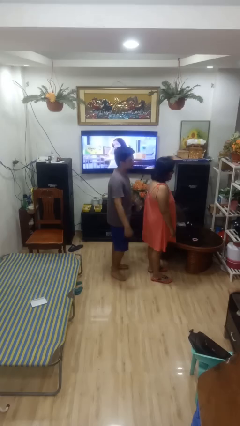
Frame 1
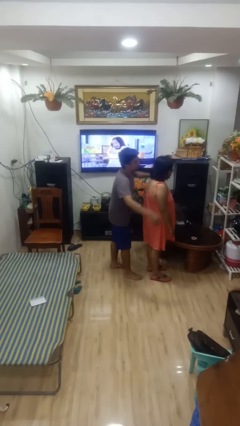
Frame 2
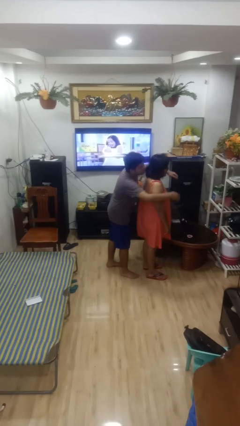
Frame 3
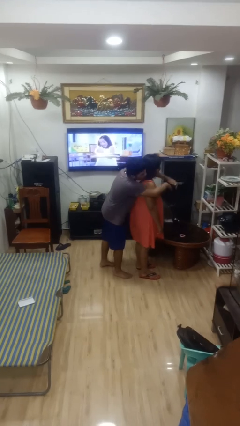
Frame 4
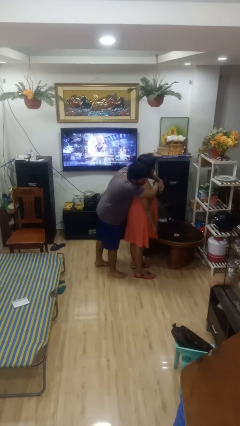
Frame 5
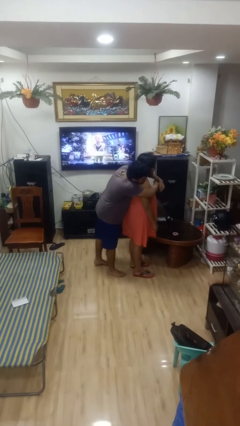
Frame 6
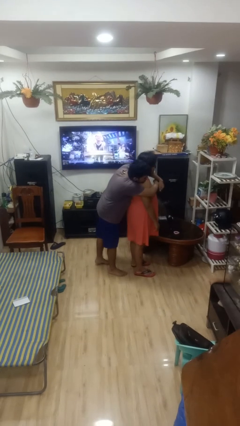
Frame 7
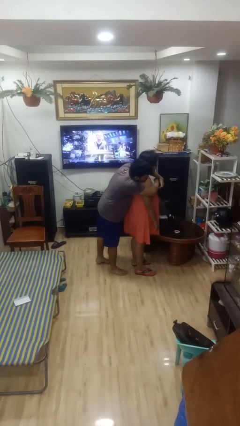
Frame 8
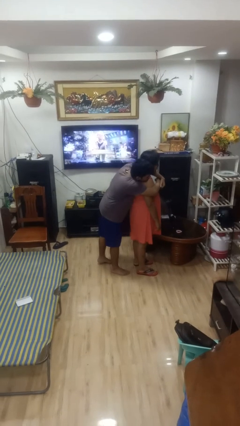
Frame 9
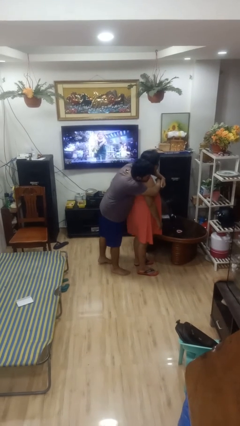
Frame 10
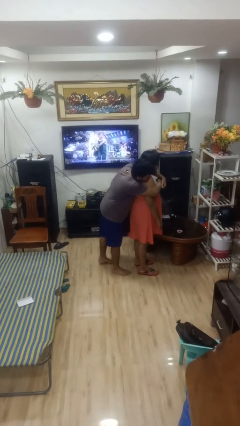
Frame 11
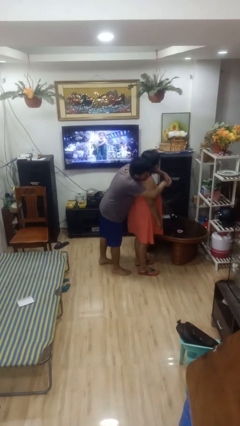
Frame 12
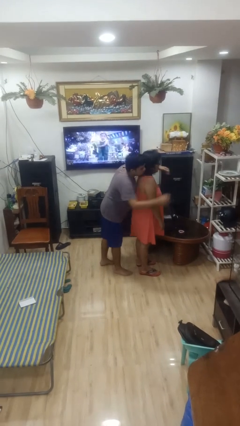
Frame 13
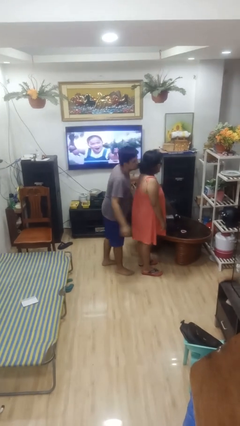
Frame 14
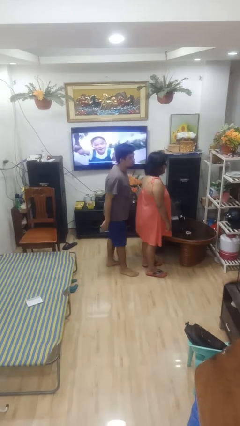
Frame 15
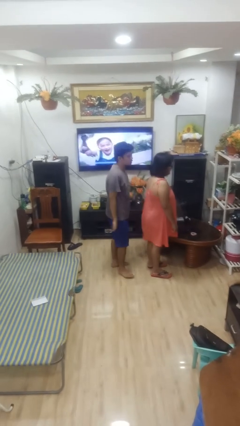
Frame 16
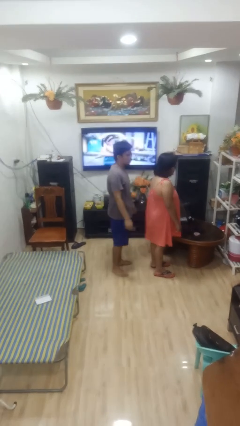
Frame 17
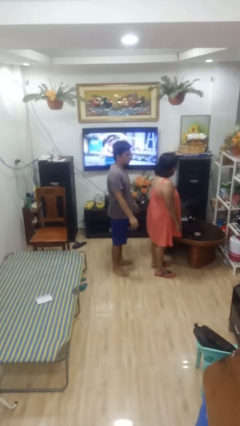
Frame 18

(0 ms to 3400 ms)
person hugs person from behind

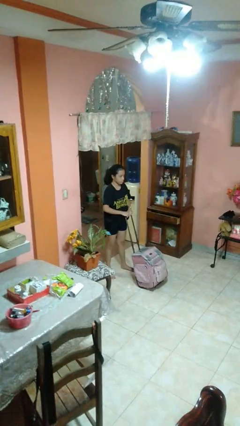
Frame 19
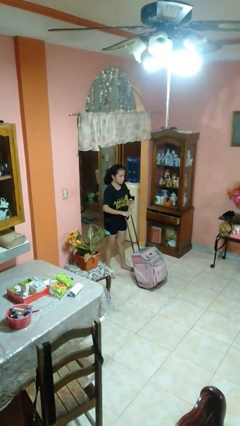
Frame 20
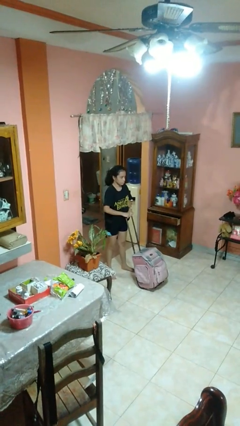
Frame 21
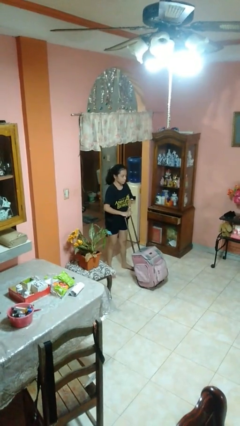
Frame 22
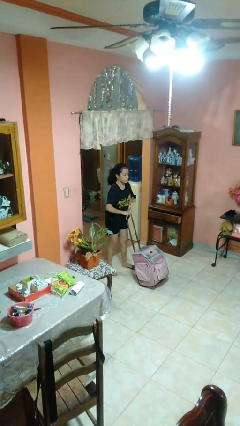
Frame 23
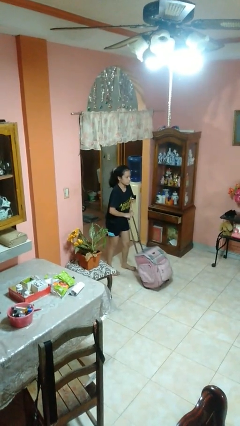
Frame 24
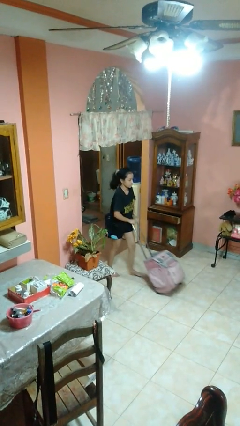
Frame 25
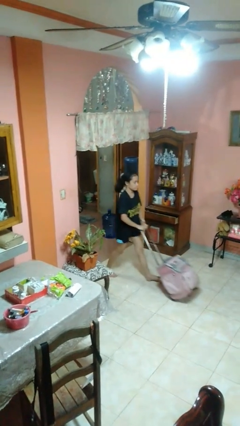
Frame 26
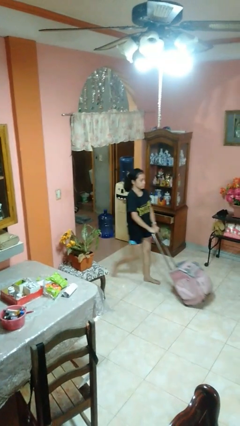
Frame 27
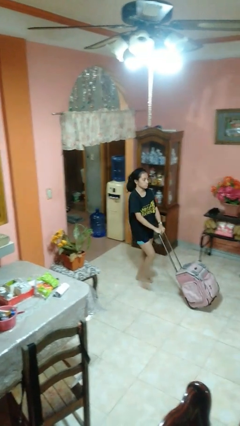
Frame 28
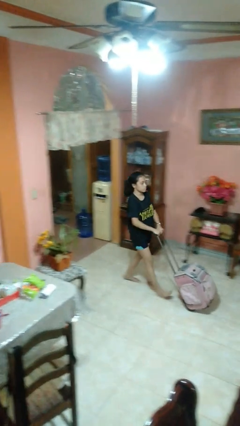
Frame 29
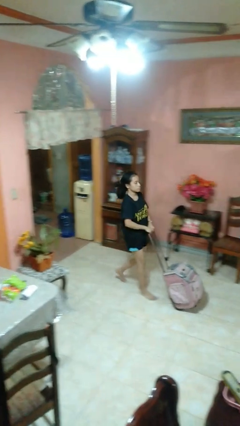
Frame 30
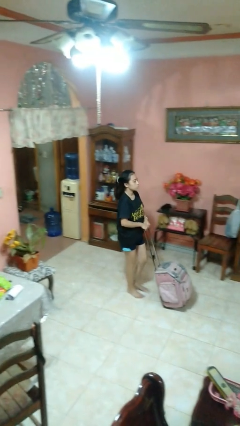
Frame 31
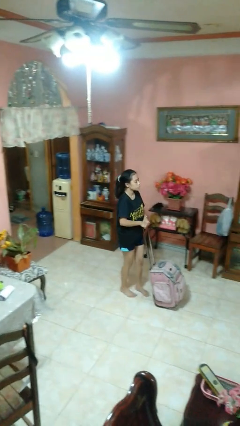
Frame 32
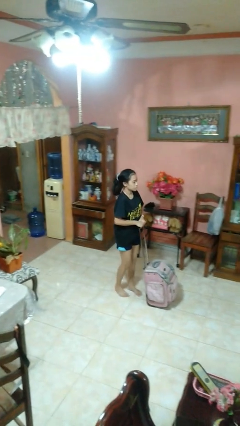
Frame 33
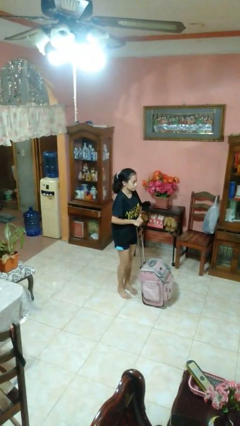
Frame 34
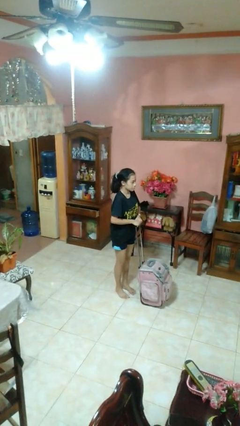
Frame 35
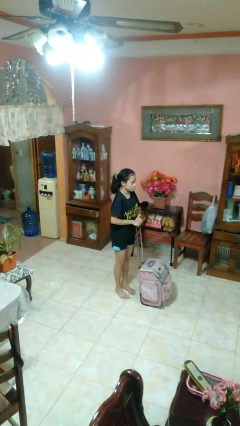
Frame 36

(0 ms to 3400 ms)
person pushes wheeled cart

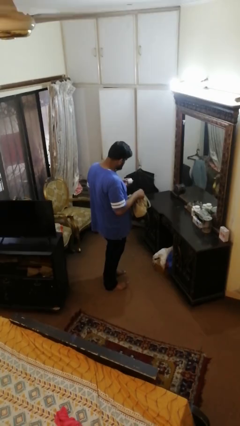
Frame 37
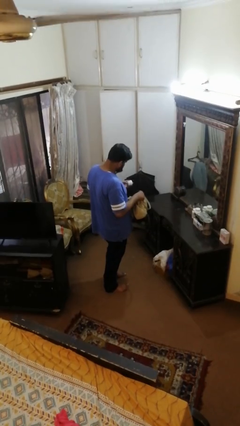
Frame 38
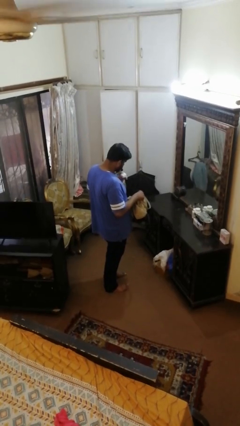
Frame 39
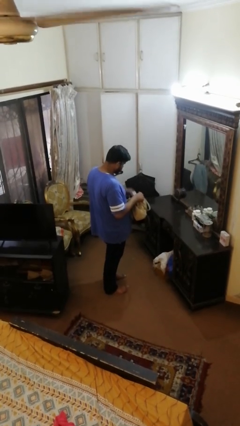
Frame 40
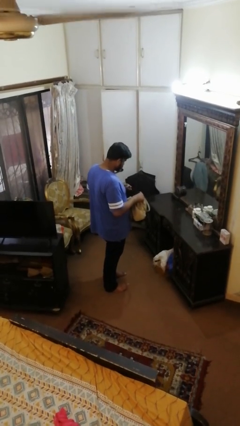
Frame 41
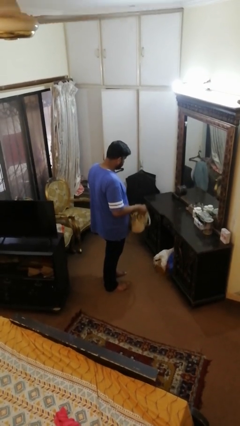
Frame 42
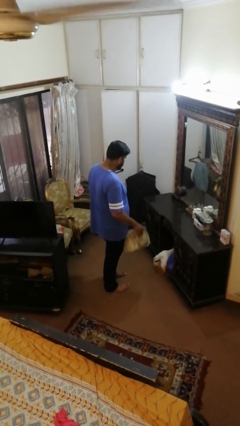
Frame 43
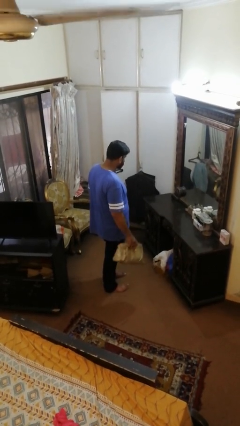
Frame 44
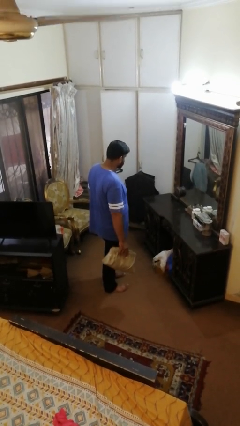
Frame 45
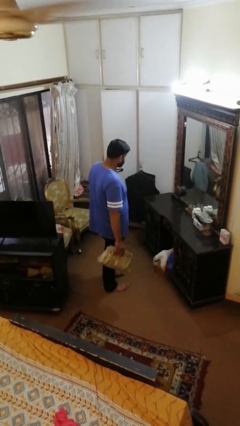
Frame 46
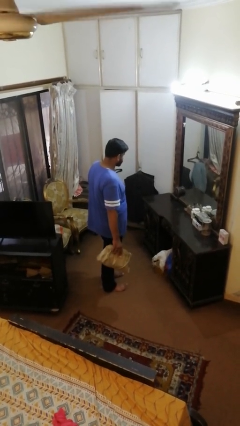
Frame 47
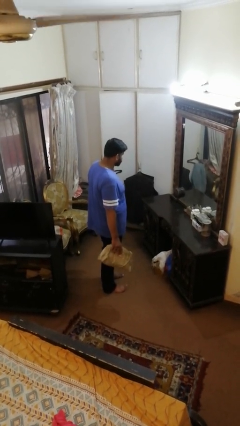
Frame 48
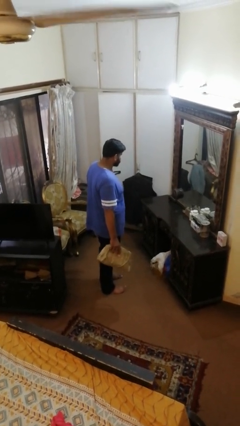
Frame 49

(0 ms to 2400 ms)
person puts object into purse

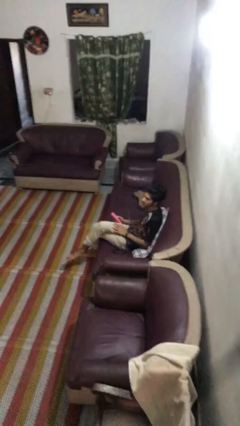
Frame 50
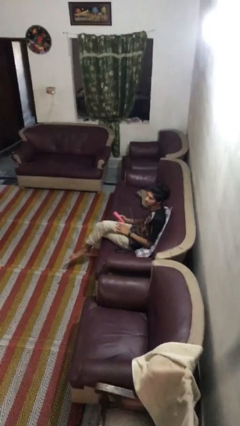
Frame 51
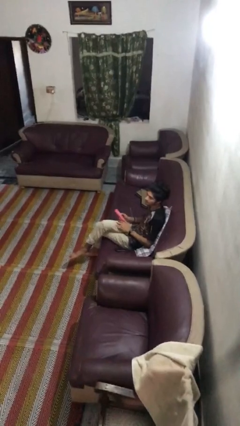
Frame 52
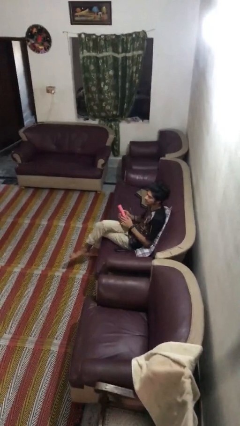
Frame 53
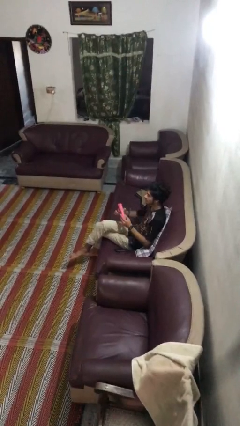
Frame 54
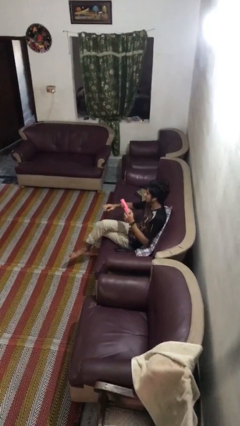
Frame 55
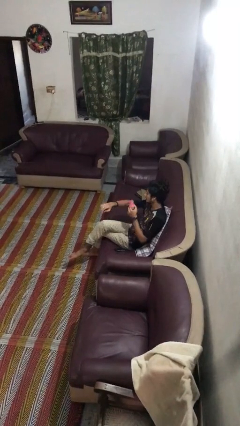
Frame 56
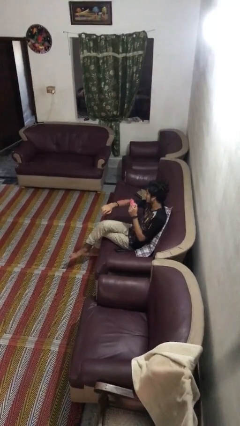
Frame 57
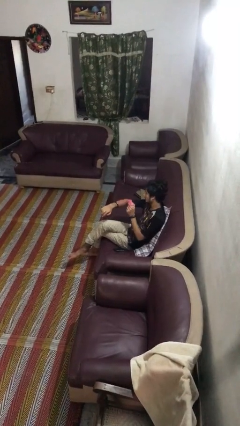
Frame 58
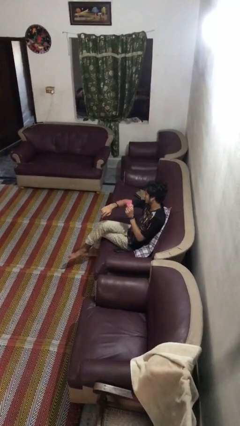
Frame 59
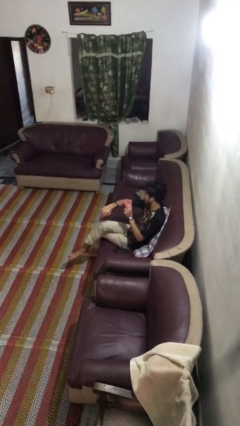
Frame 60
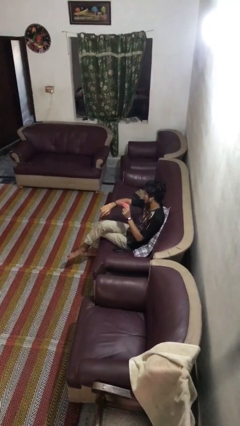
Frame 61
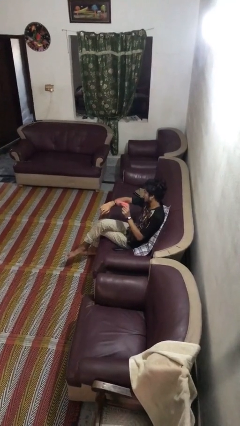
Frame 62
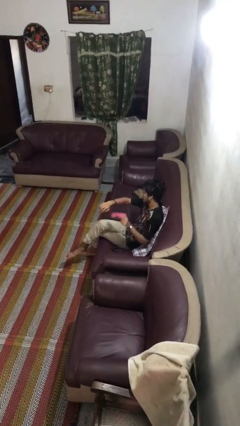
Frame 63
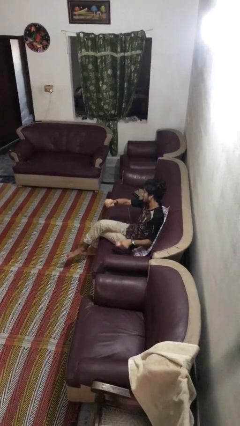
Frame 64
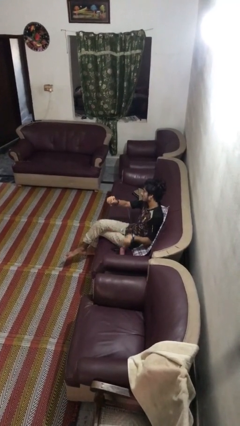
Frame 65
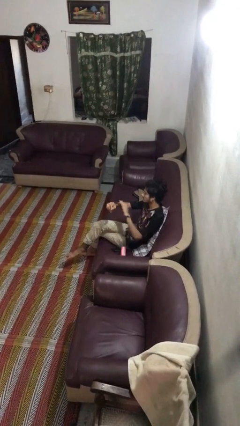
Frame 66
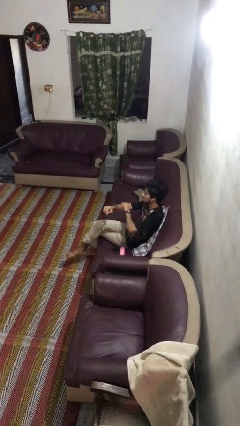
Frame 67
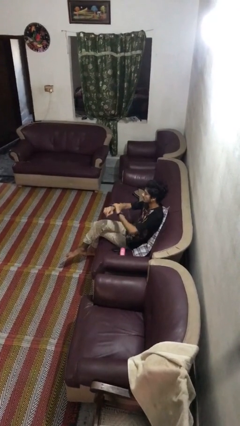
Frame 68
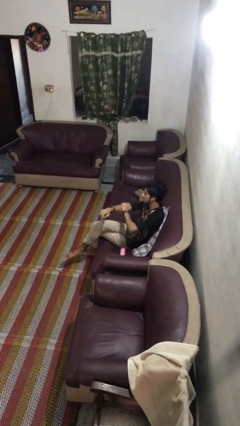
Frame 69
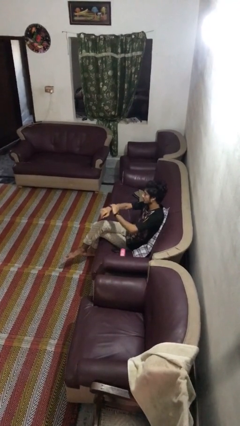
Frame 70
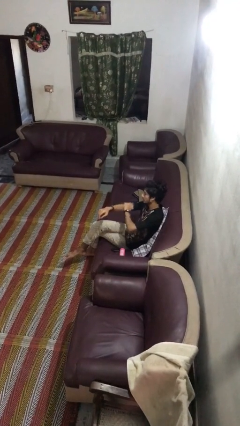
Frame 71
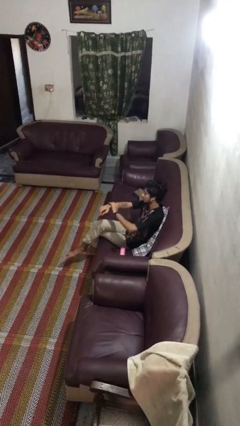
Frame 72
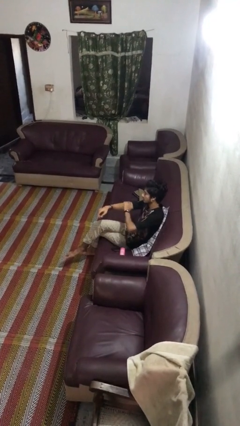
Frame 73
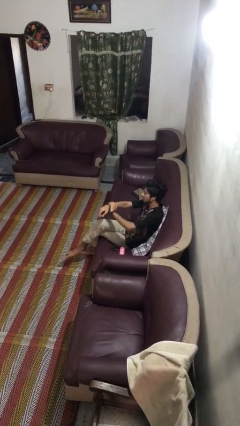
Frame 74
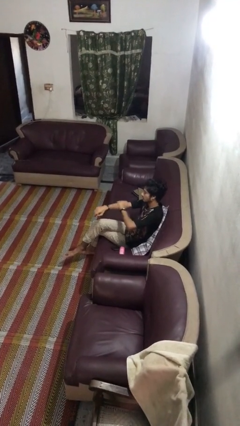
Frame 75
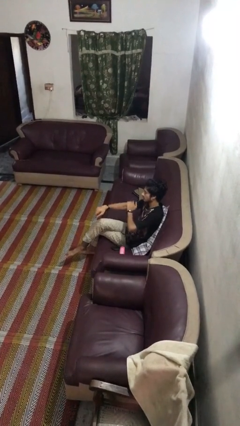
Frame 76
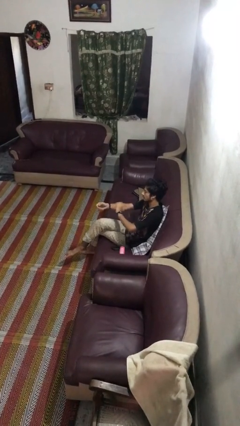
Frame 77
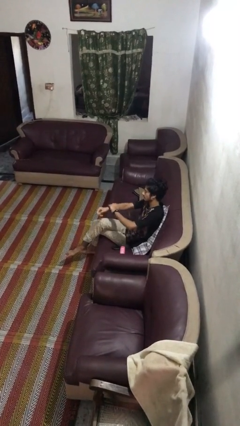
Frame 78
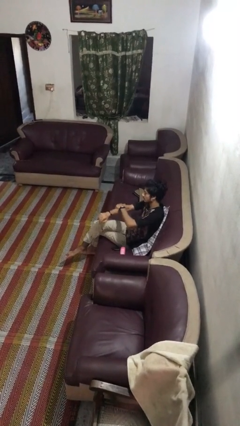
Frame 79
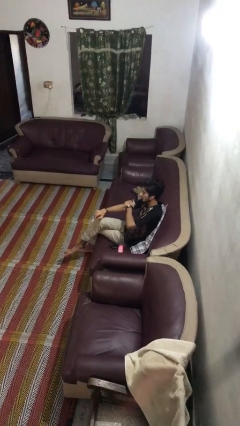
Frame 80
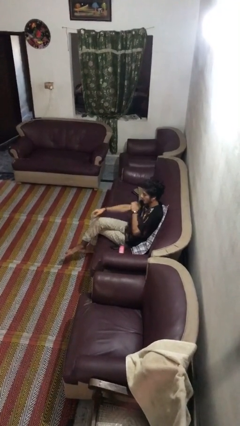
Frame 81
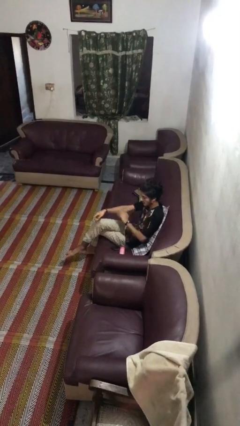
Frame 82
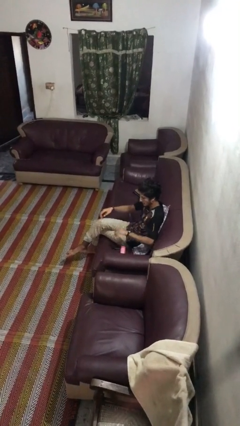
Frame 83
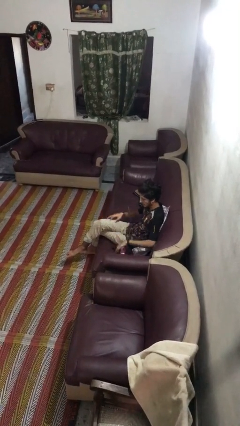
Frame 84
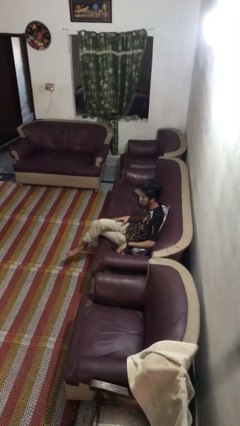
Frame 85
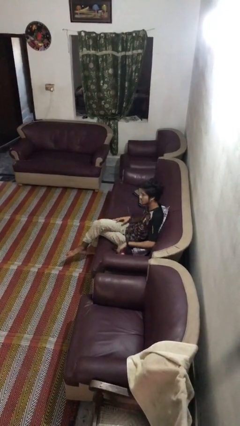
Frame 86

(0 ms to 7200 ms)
person applies sunscreen

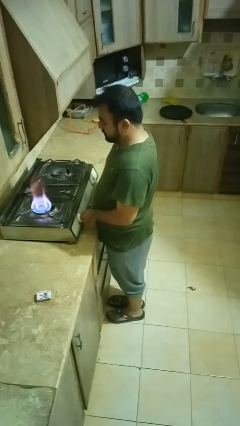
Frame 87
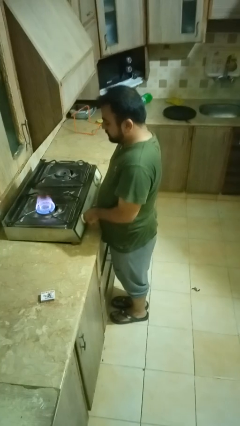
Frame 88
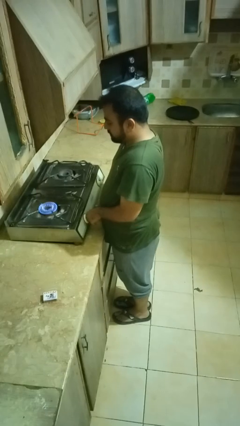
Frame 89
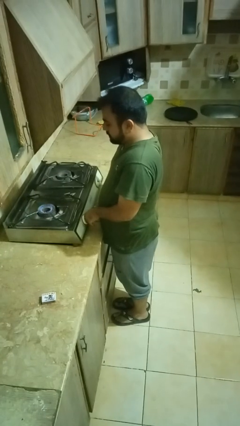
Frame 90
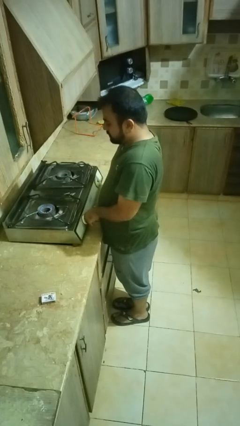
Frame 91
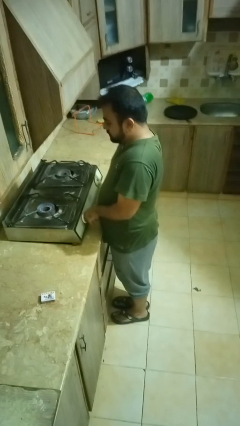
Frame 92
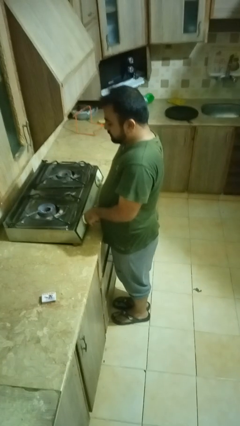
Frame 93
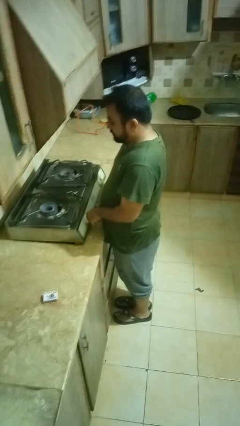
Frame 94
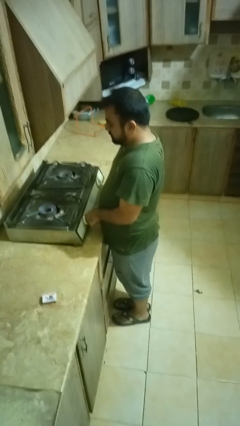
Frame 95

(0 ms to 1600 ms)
person turns off stovetop
